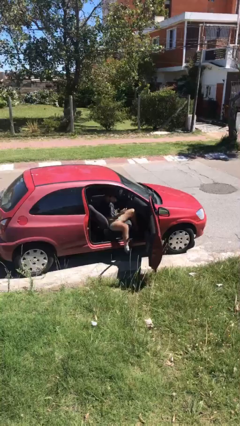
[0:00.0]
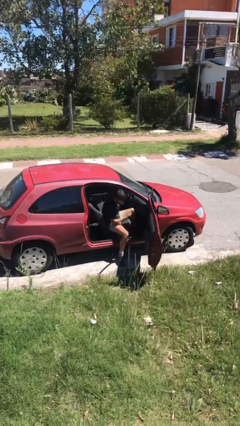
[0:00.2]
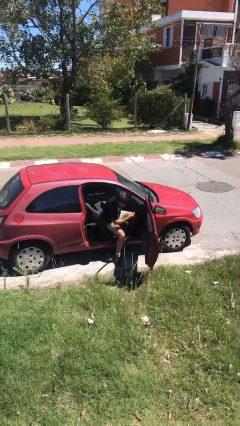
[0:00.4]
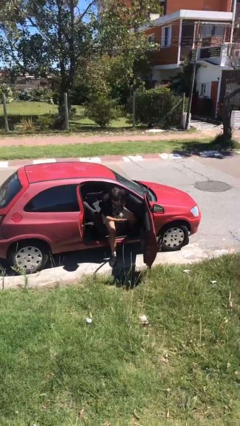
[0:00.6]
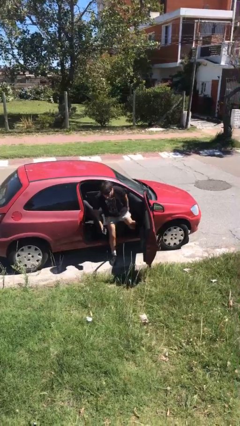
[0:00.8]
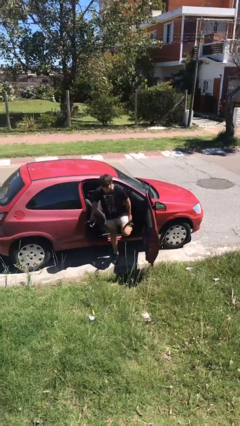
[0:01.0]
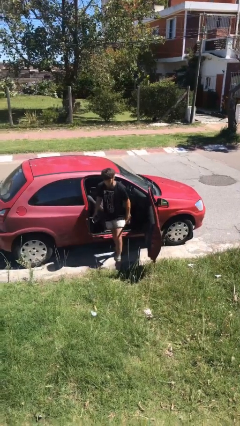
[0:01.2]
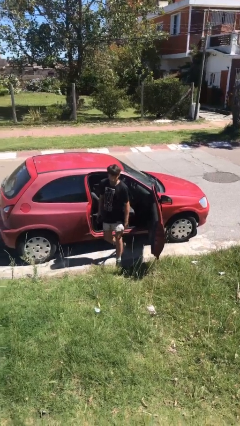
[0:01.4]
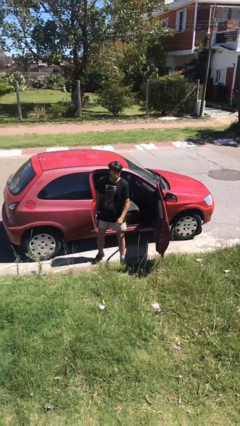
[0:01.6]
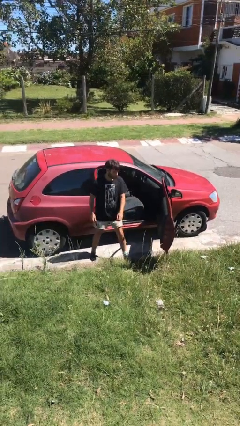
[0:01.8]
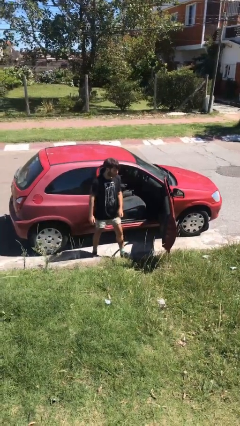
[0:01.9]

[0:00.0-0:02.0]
person exits car

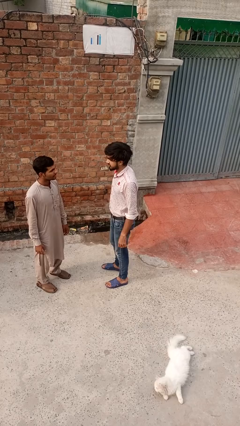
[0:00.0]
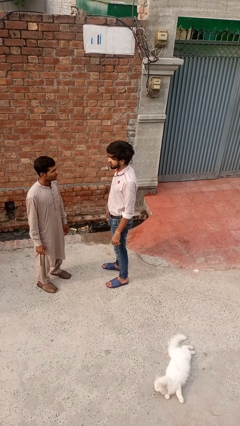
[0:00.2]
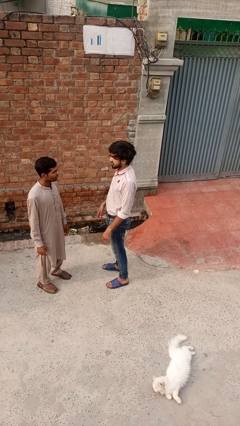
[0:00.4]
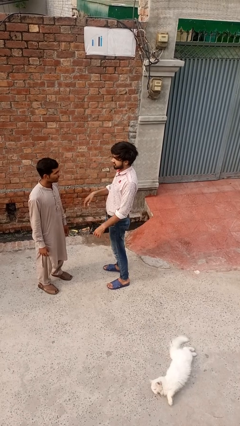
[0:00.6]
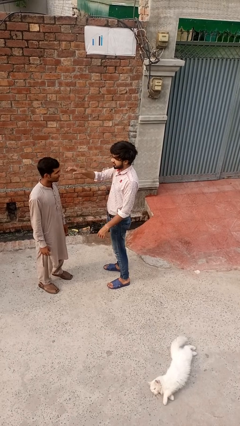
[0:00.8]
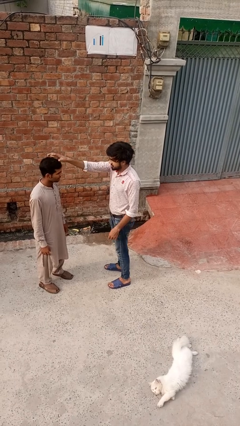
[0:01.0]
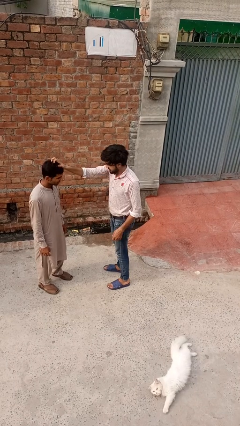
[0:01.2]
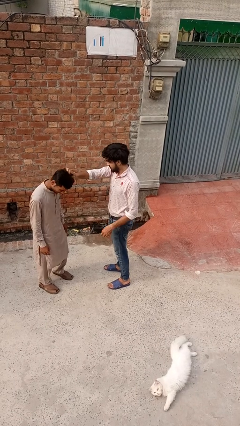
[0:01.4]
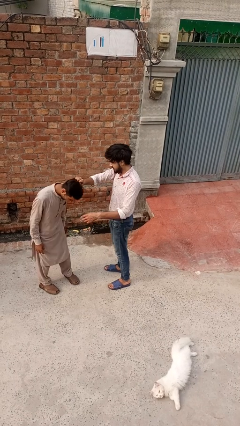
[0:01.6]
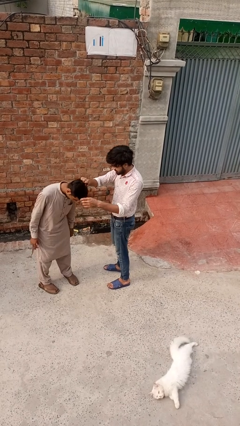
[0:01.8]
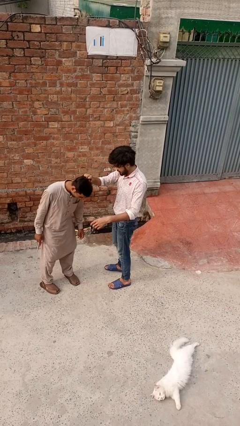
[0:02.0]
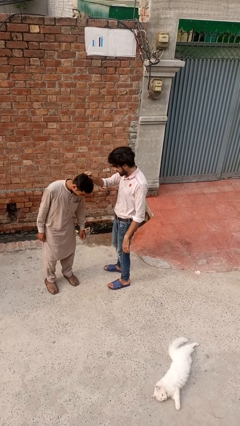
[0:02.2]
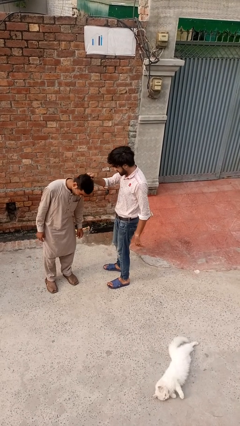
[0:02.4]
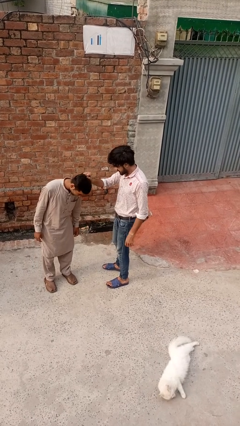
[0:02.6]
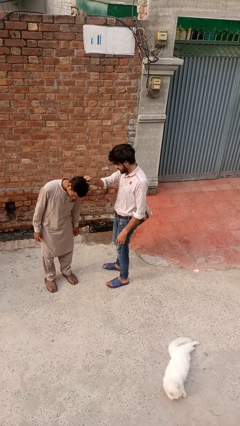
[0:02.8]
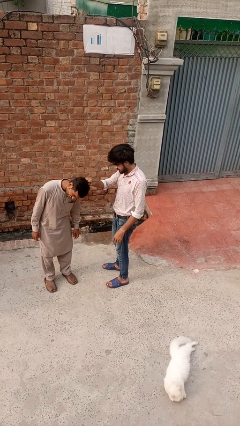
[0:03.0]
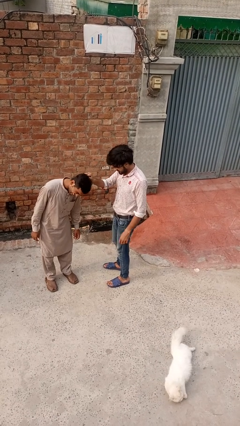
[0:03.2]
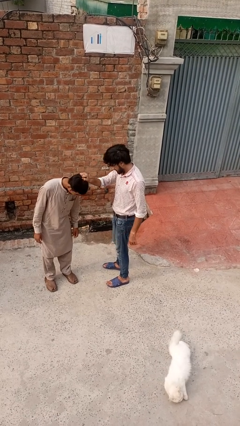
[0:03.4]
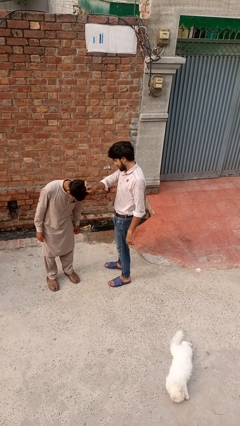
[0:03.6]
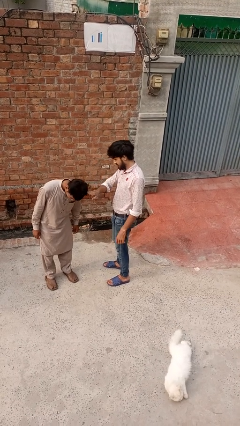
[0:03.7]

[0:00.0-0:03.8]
person grabs person by hair

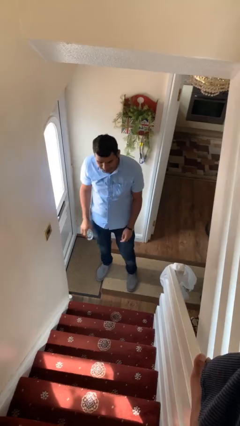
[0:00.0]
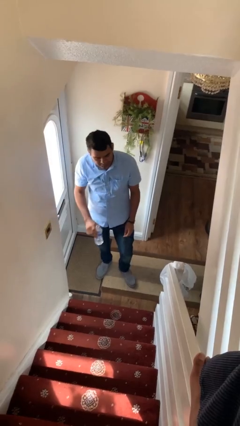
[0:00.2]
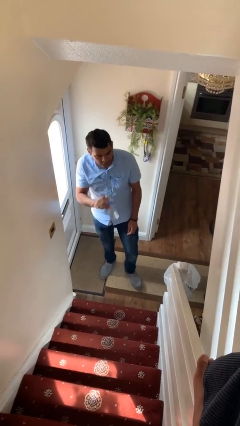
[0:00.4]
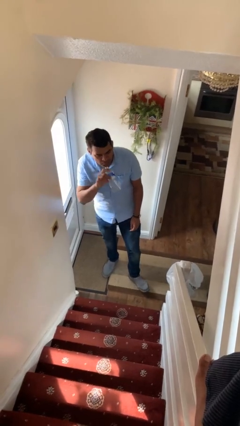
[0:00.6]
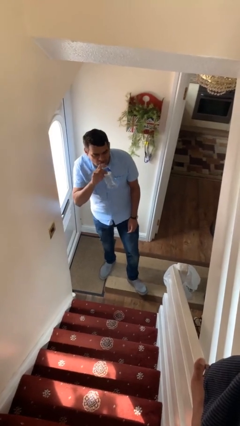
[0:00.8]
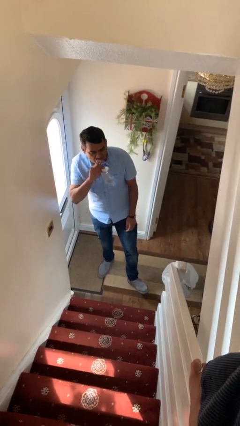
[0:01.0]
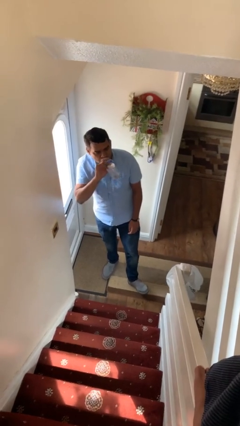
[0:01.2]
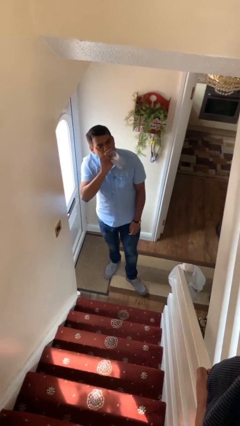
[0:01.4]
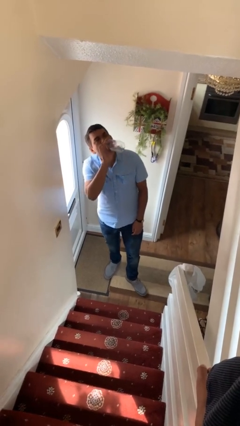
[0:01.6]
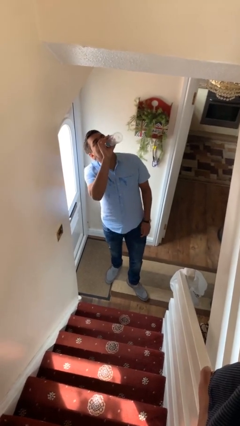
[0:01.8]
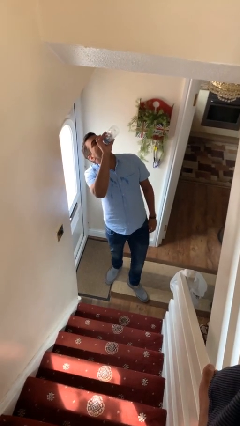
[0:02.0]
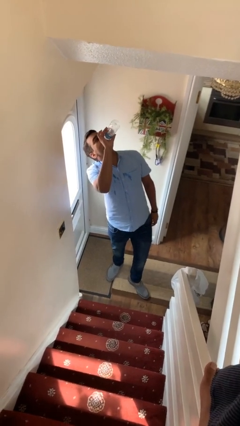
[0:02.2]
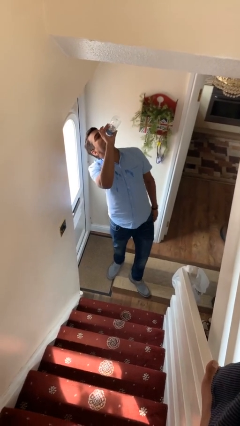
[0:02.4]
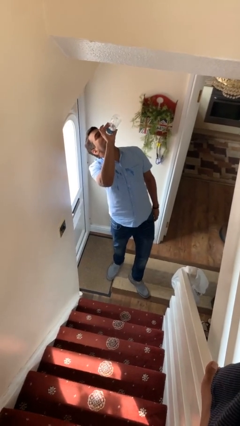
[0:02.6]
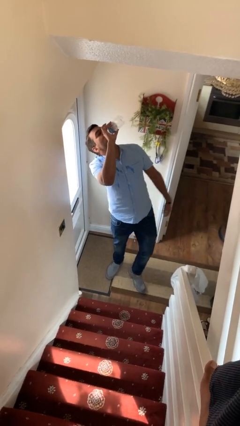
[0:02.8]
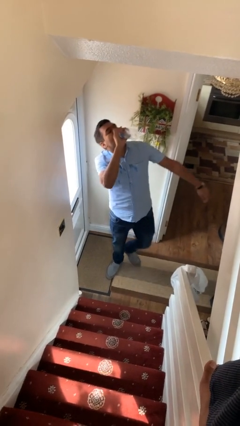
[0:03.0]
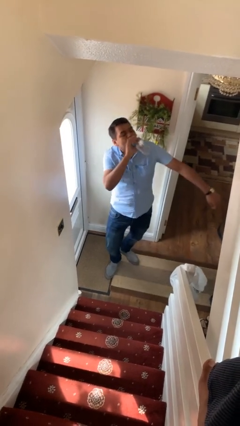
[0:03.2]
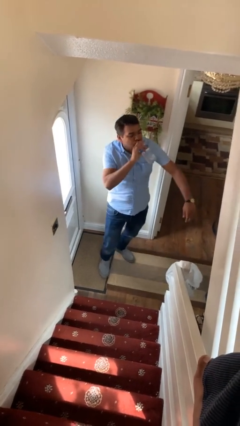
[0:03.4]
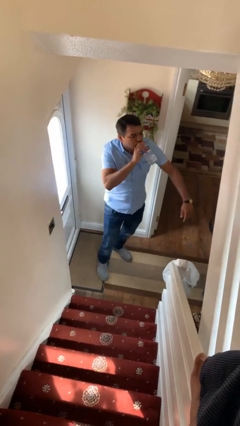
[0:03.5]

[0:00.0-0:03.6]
person drinks from bottle

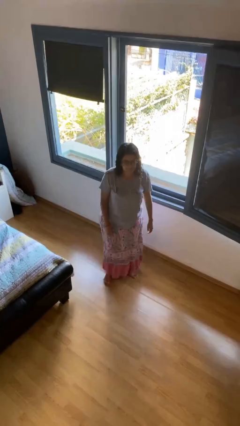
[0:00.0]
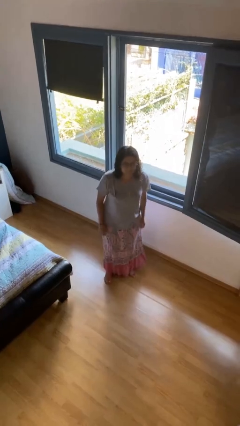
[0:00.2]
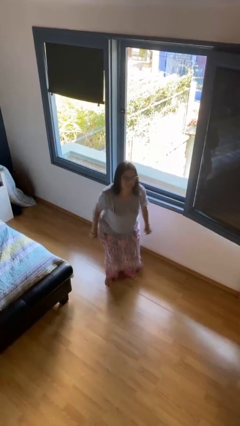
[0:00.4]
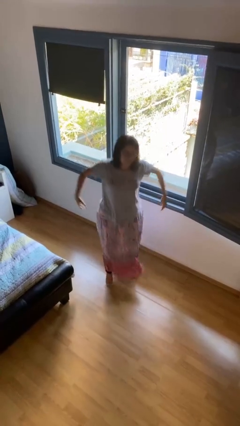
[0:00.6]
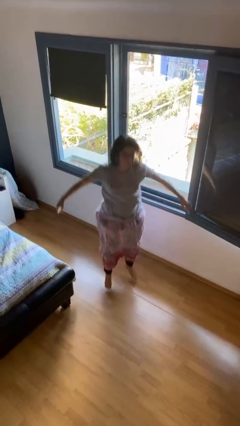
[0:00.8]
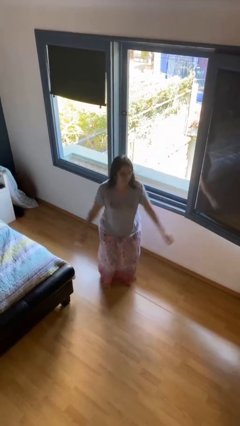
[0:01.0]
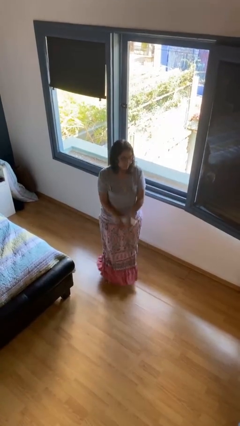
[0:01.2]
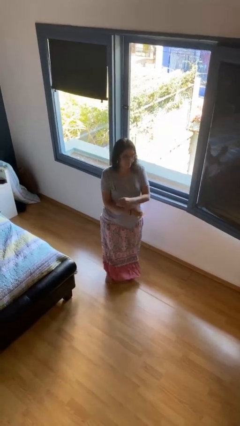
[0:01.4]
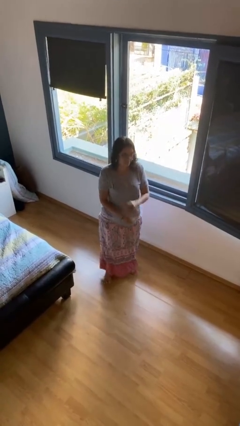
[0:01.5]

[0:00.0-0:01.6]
person jumps

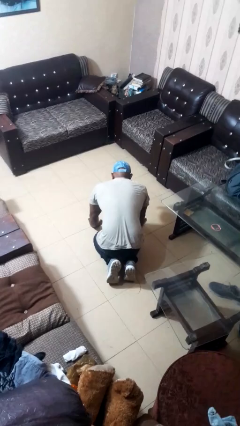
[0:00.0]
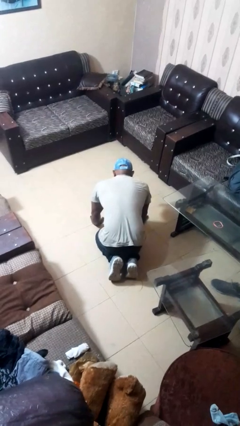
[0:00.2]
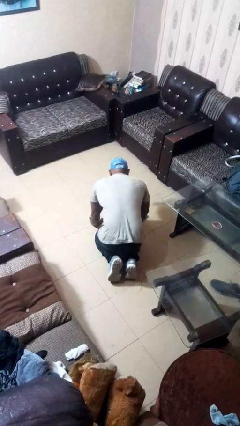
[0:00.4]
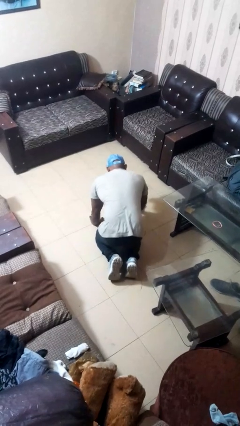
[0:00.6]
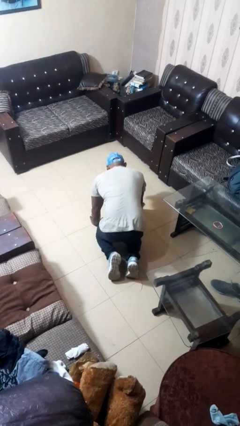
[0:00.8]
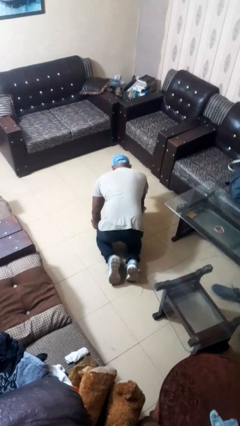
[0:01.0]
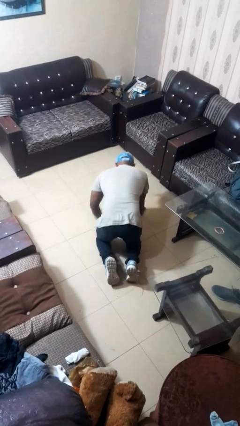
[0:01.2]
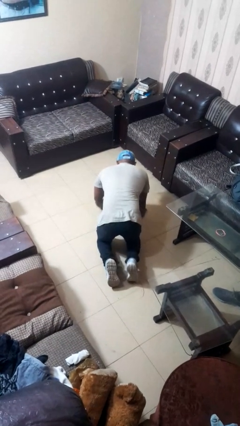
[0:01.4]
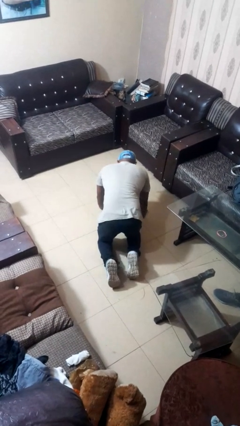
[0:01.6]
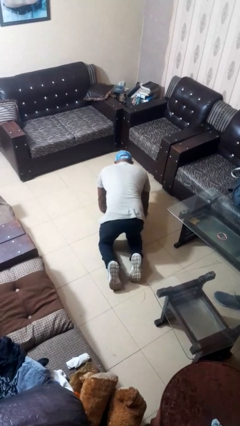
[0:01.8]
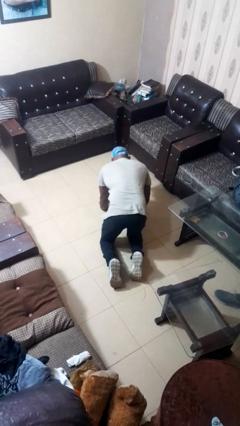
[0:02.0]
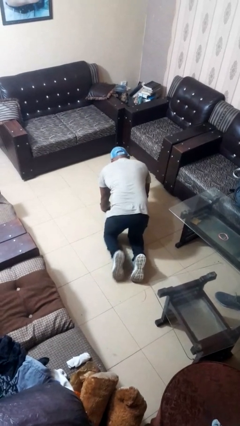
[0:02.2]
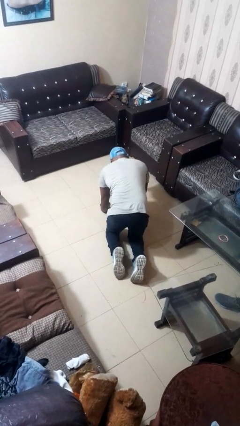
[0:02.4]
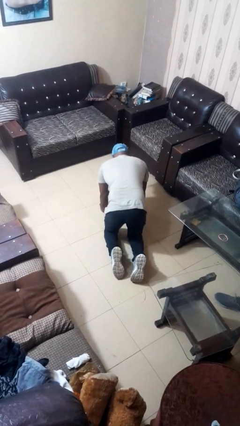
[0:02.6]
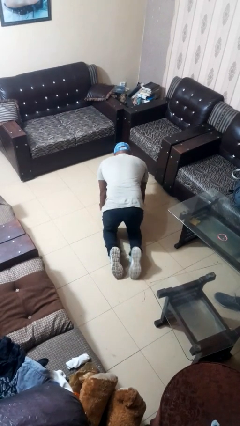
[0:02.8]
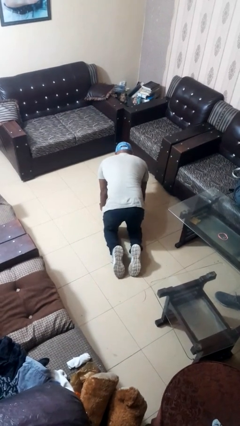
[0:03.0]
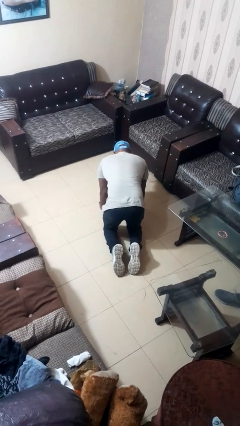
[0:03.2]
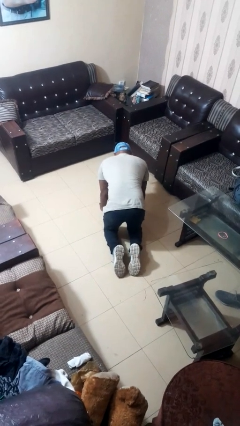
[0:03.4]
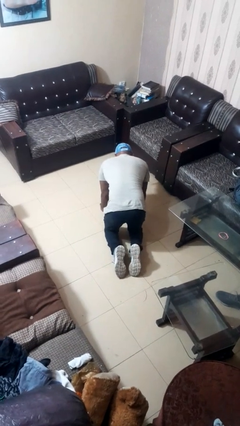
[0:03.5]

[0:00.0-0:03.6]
person crawls

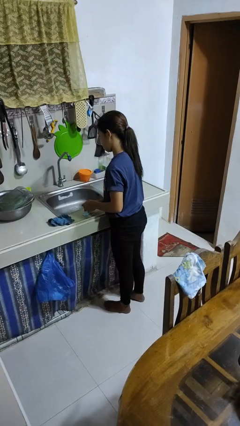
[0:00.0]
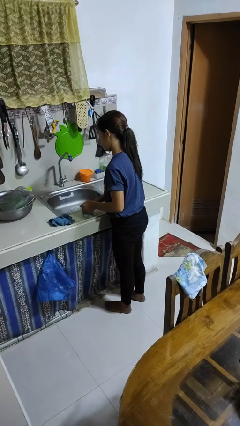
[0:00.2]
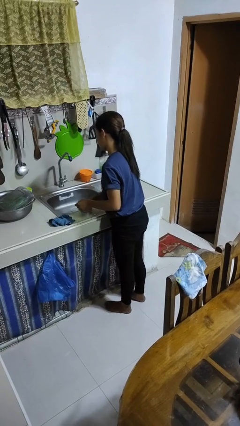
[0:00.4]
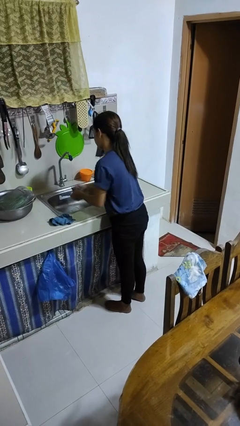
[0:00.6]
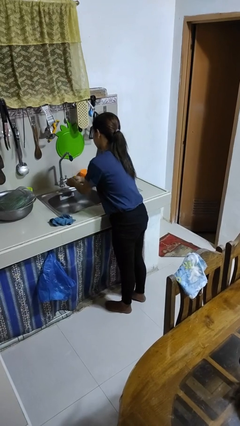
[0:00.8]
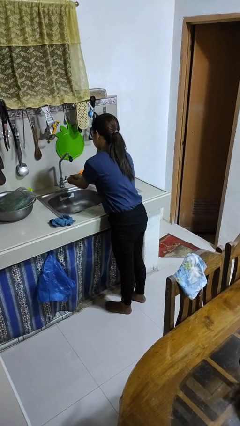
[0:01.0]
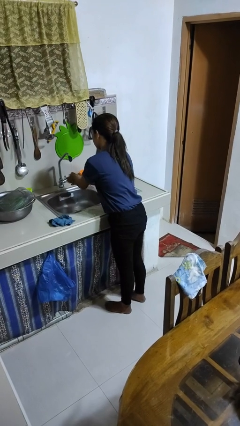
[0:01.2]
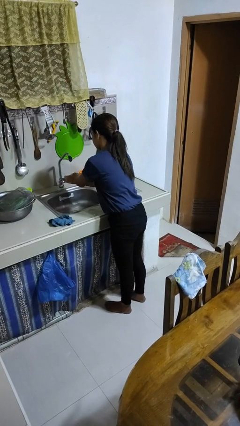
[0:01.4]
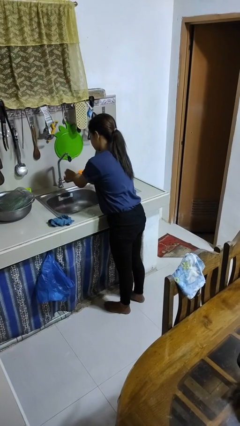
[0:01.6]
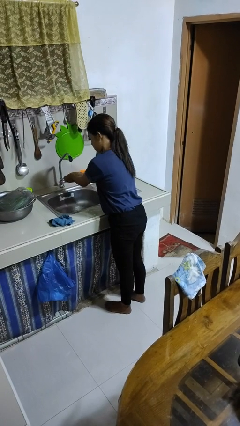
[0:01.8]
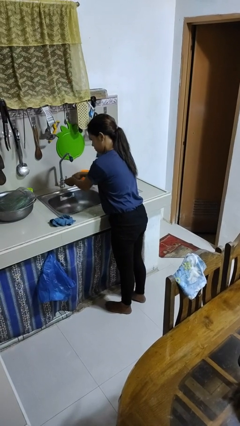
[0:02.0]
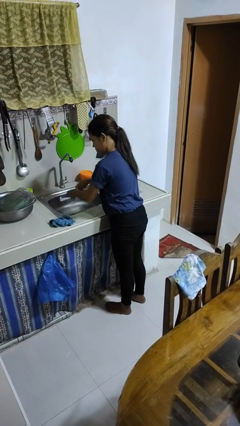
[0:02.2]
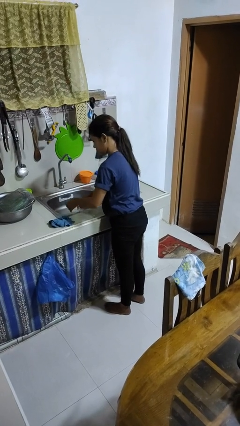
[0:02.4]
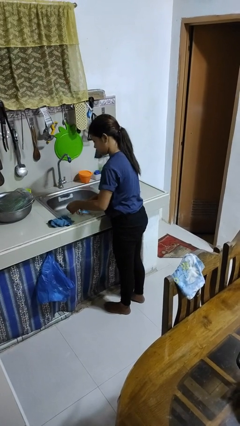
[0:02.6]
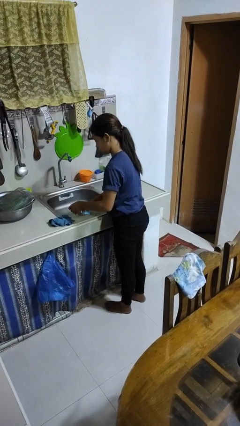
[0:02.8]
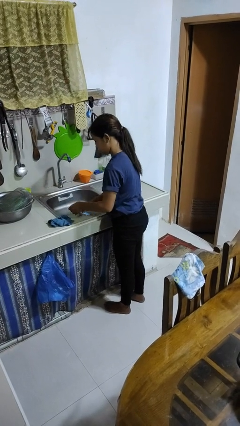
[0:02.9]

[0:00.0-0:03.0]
person washes hands
